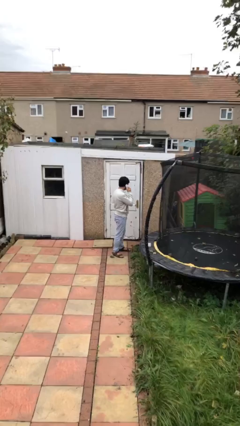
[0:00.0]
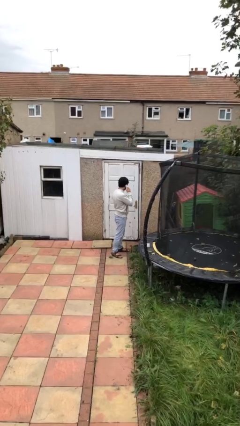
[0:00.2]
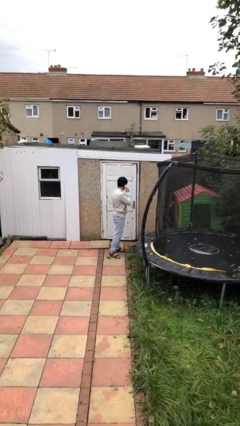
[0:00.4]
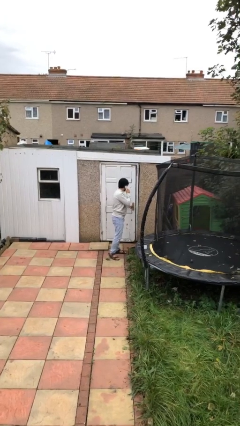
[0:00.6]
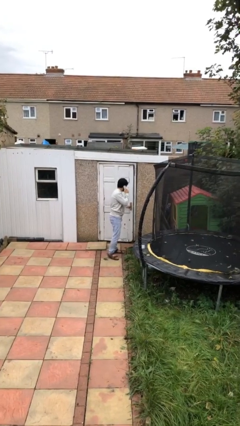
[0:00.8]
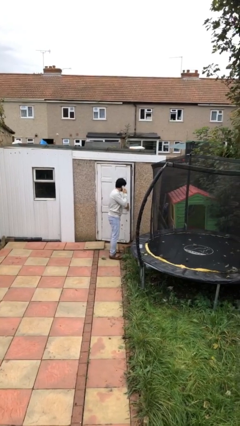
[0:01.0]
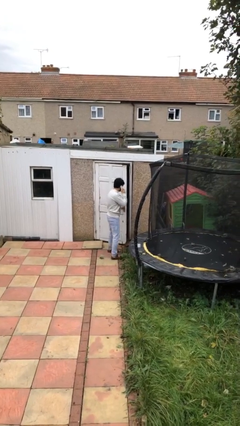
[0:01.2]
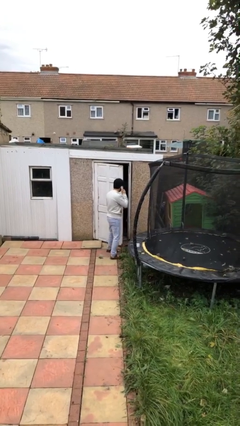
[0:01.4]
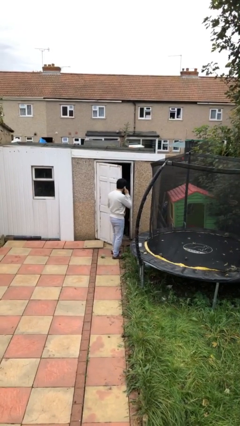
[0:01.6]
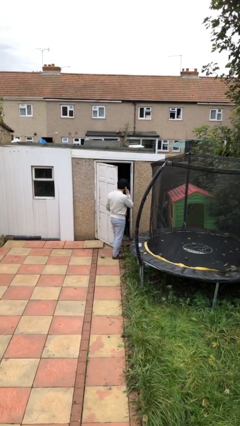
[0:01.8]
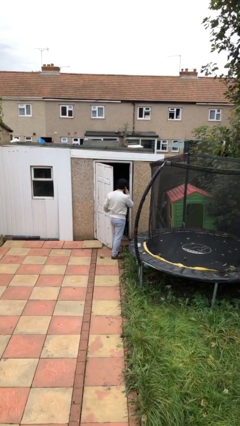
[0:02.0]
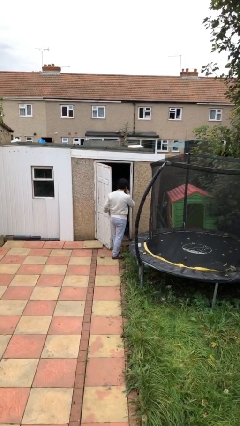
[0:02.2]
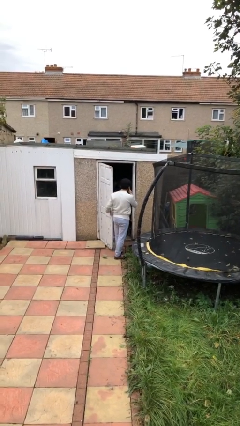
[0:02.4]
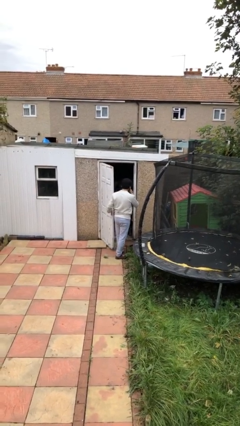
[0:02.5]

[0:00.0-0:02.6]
person opens facility door

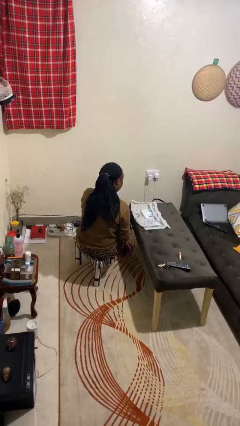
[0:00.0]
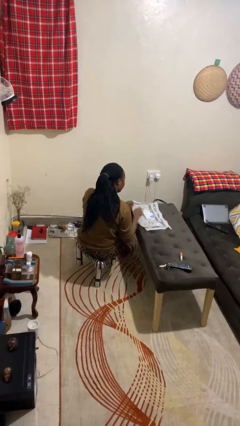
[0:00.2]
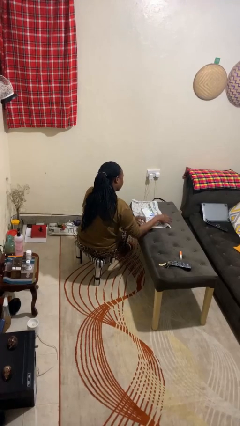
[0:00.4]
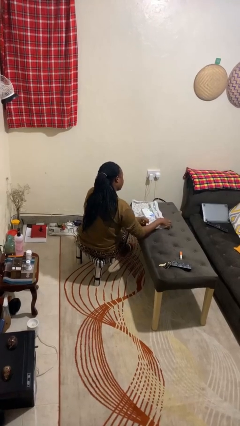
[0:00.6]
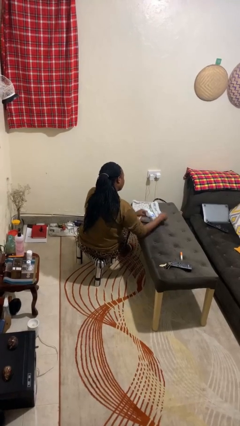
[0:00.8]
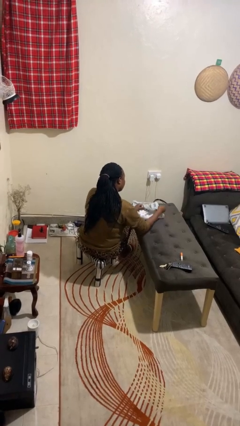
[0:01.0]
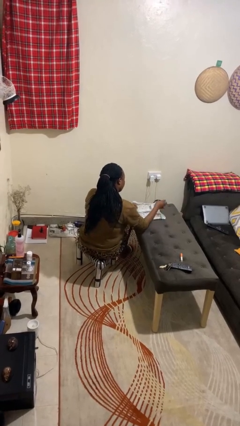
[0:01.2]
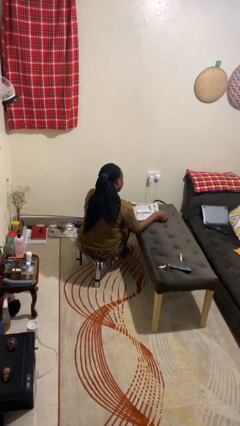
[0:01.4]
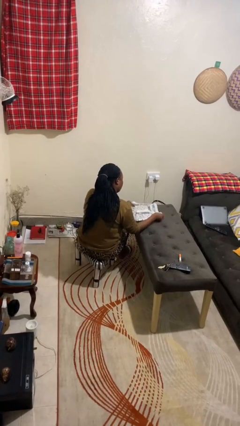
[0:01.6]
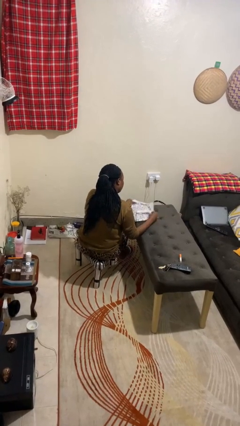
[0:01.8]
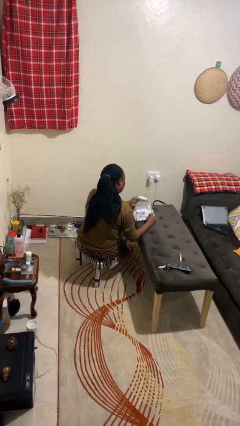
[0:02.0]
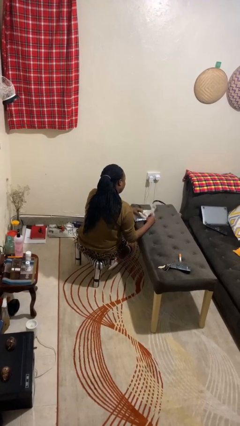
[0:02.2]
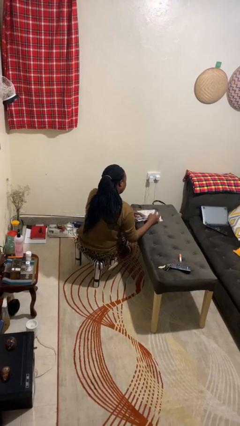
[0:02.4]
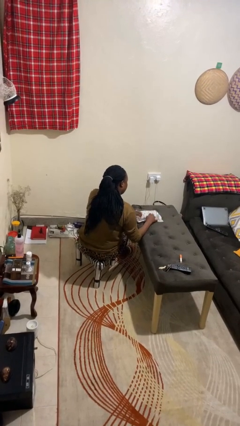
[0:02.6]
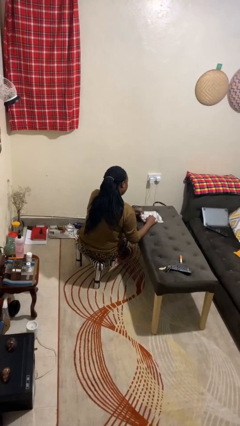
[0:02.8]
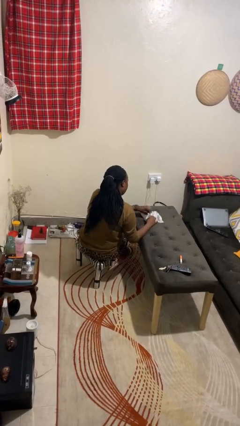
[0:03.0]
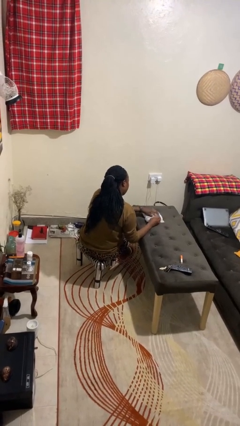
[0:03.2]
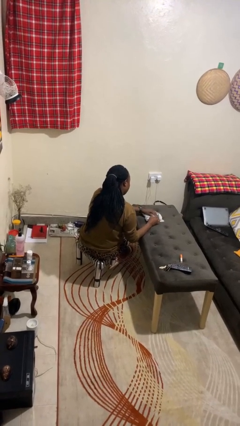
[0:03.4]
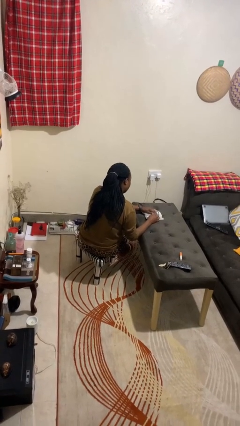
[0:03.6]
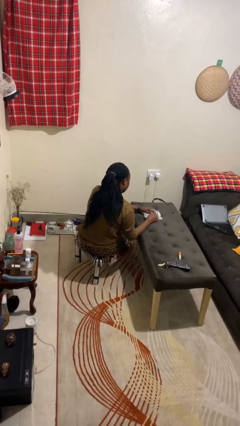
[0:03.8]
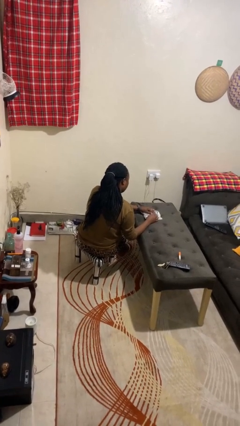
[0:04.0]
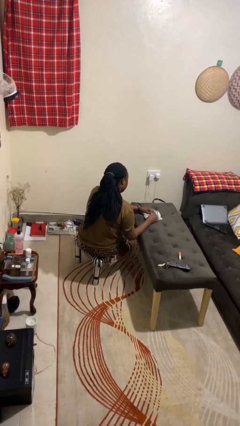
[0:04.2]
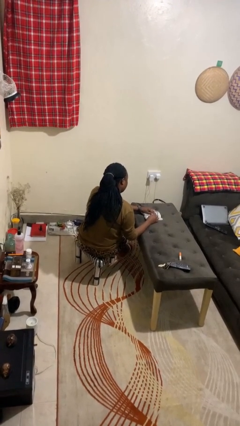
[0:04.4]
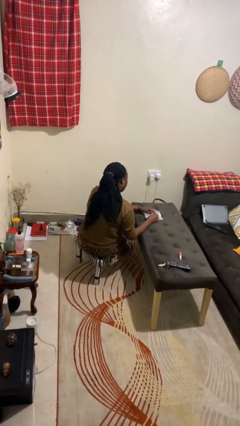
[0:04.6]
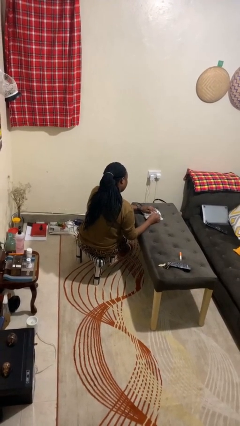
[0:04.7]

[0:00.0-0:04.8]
person wraps box

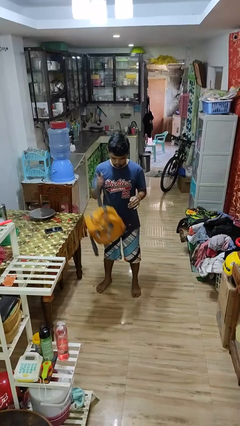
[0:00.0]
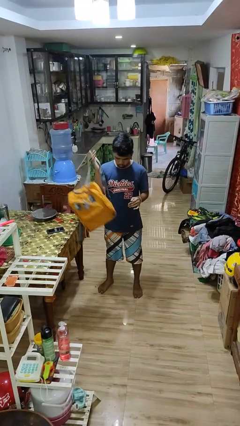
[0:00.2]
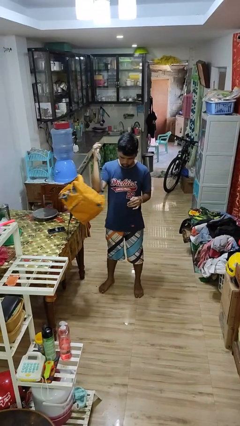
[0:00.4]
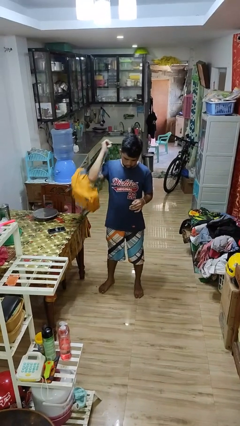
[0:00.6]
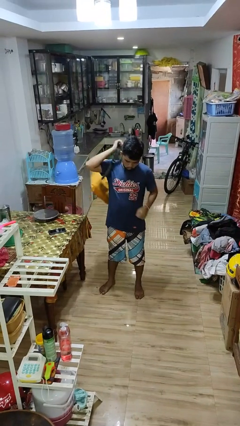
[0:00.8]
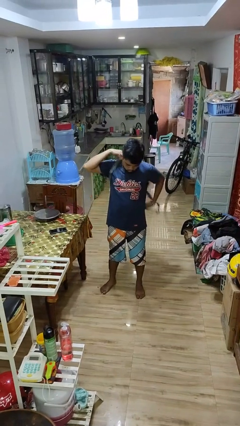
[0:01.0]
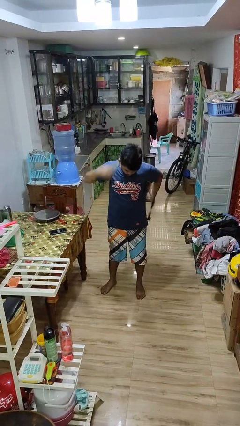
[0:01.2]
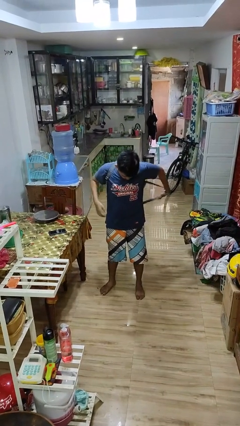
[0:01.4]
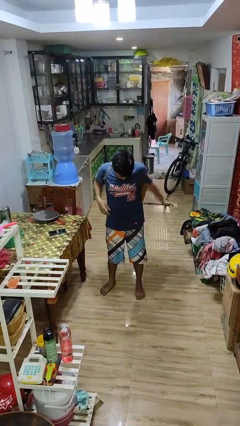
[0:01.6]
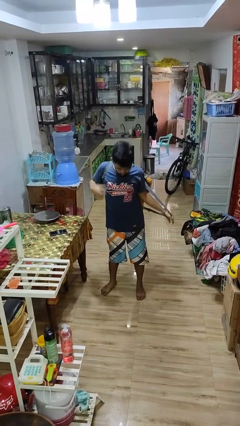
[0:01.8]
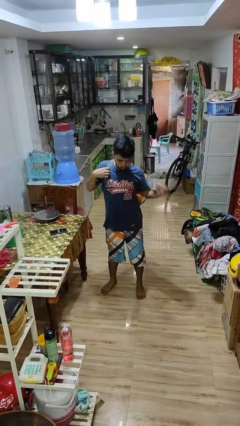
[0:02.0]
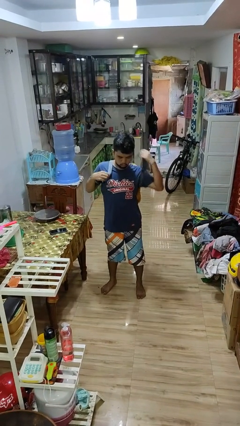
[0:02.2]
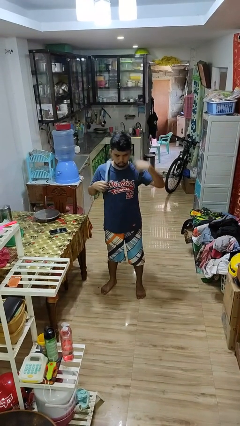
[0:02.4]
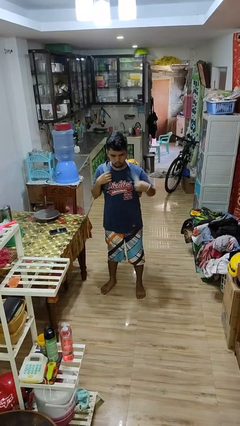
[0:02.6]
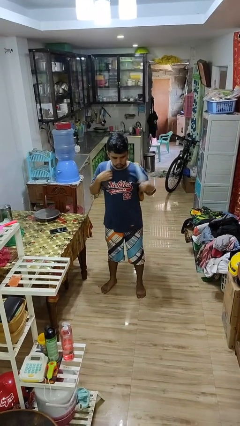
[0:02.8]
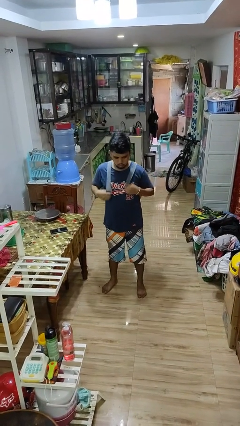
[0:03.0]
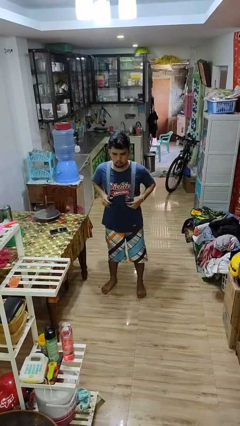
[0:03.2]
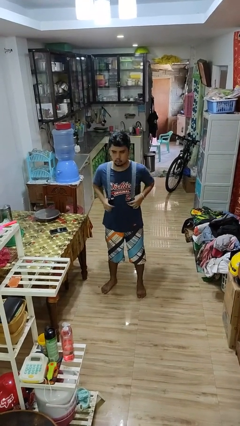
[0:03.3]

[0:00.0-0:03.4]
person puts on backpack

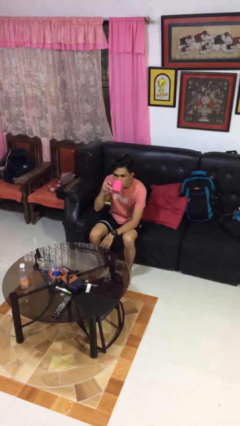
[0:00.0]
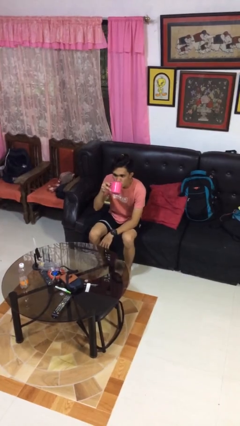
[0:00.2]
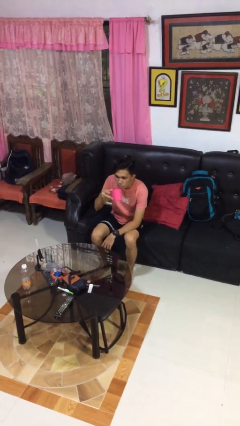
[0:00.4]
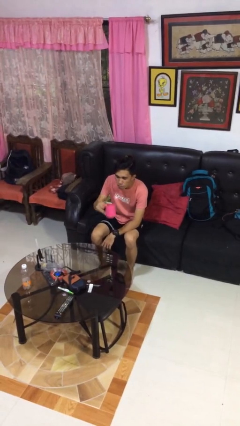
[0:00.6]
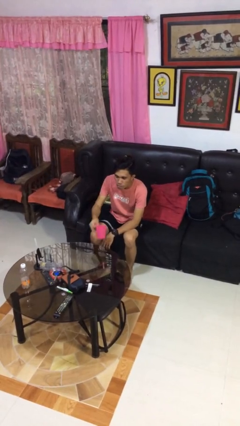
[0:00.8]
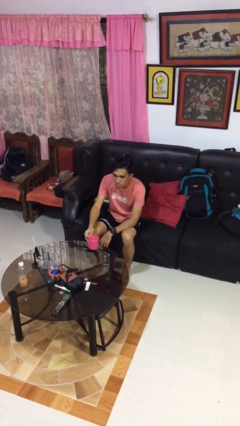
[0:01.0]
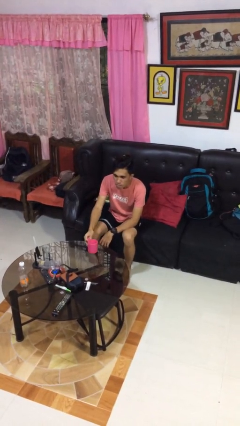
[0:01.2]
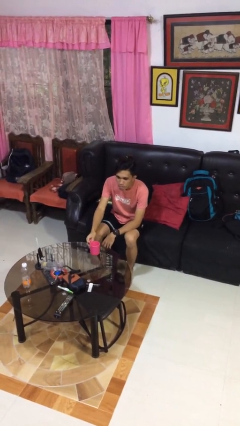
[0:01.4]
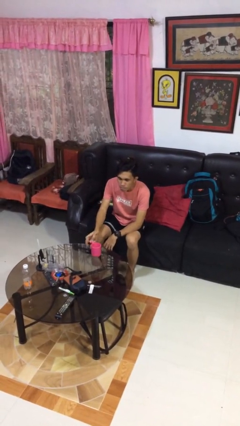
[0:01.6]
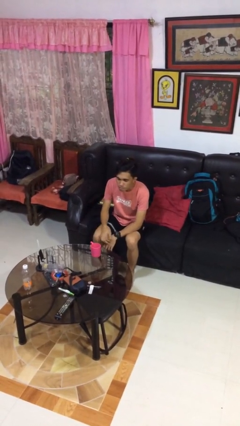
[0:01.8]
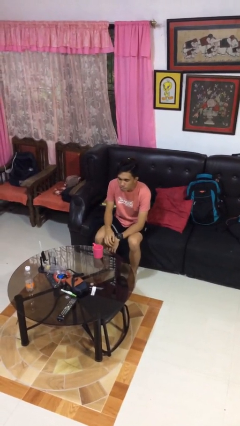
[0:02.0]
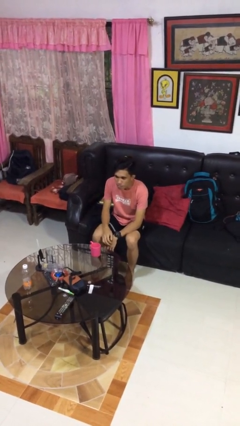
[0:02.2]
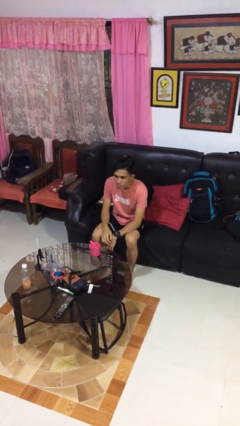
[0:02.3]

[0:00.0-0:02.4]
person puts down object on table

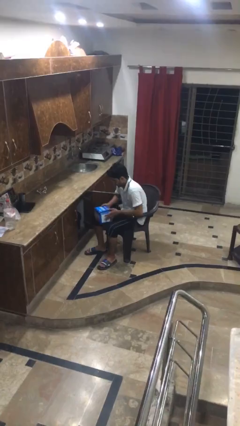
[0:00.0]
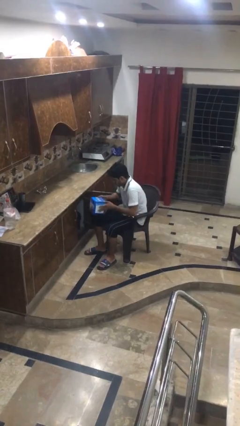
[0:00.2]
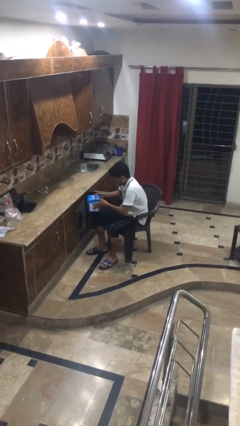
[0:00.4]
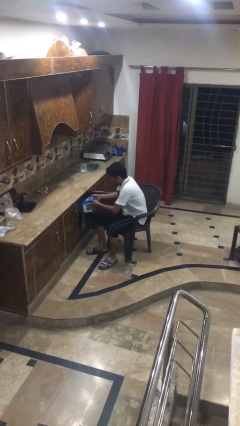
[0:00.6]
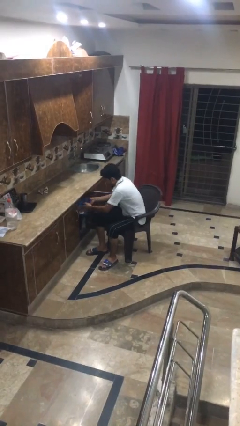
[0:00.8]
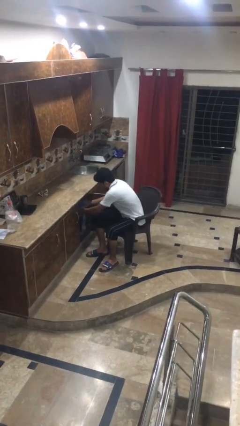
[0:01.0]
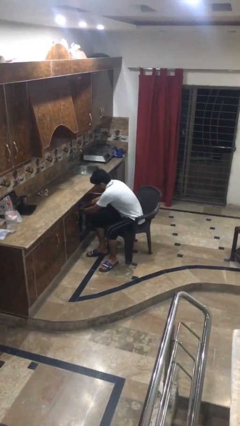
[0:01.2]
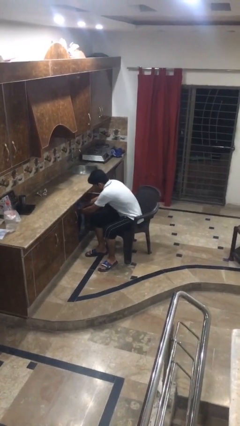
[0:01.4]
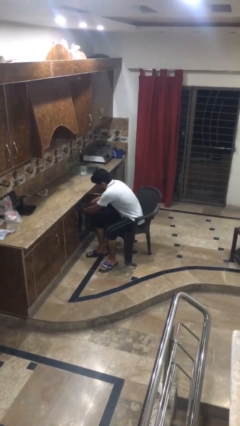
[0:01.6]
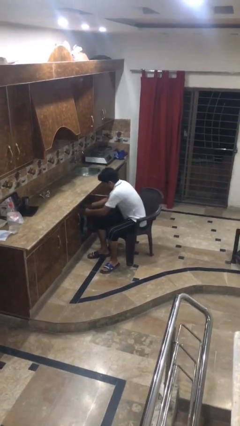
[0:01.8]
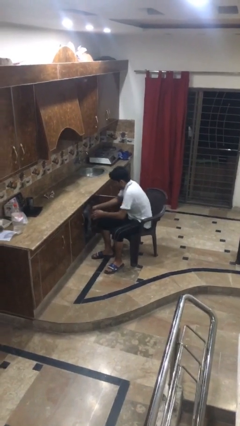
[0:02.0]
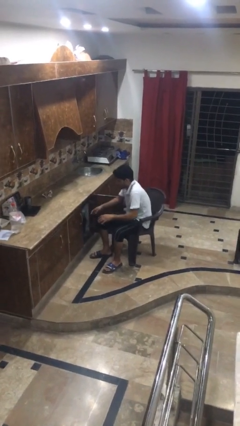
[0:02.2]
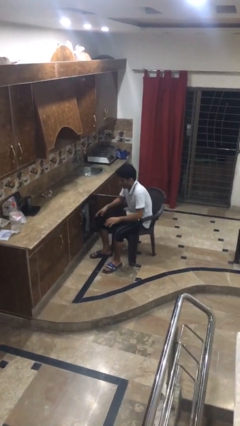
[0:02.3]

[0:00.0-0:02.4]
person puts down object into cabinet

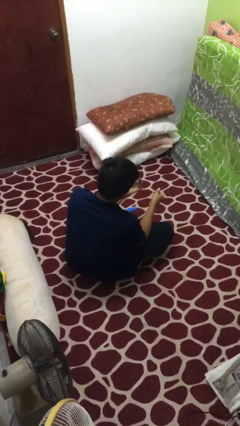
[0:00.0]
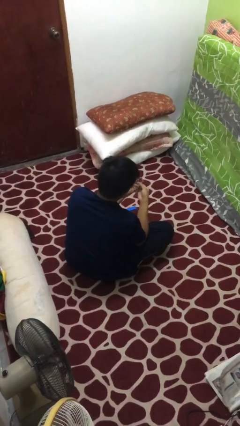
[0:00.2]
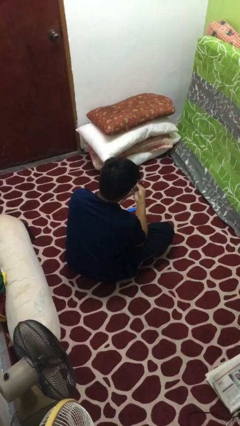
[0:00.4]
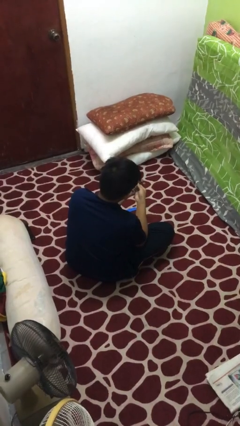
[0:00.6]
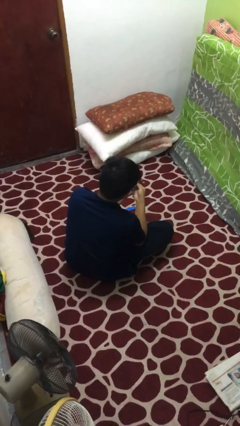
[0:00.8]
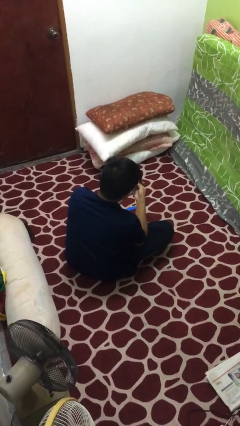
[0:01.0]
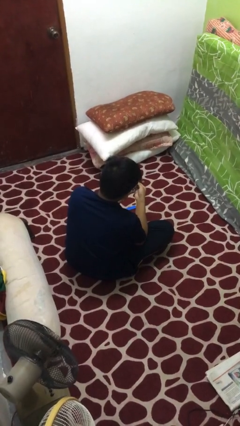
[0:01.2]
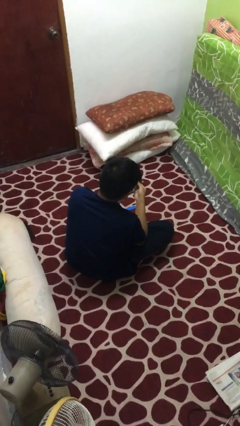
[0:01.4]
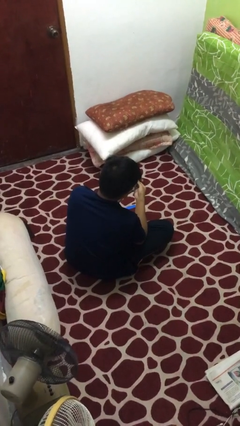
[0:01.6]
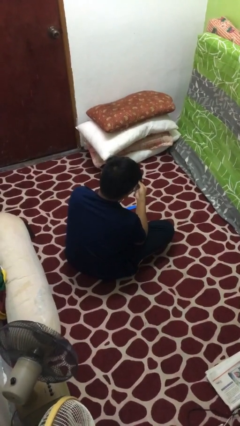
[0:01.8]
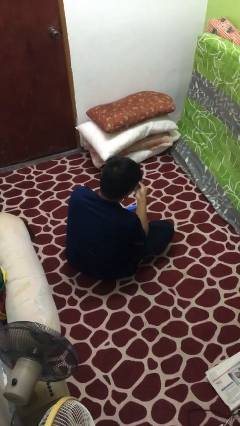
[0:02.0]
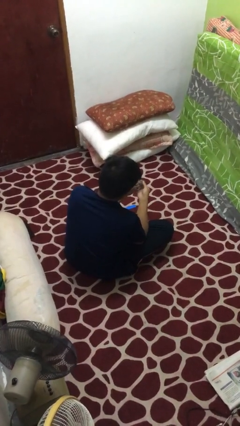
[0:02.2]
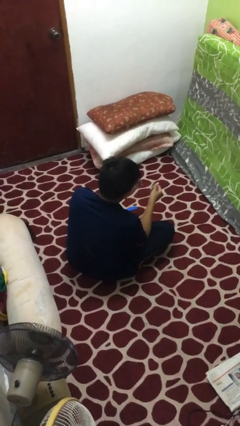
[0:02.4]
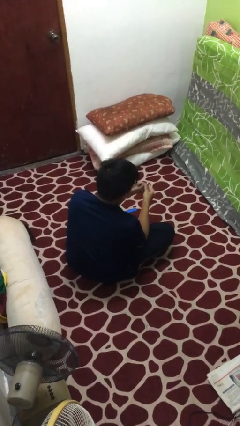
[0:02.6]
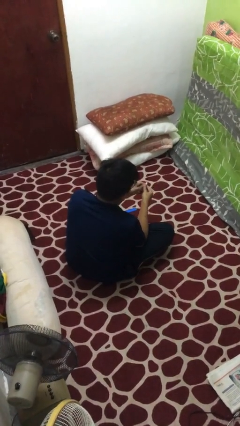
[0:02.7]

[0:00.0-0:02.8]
person clips fingernails
